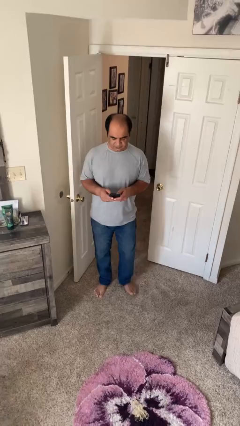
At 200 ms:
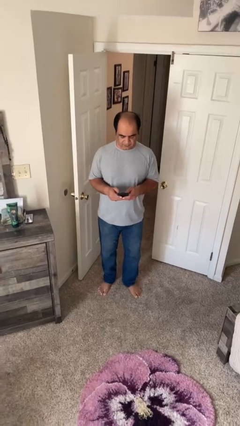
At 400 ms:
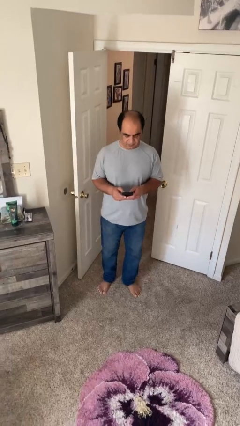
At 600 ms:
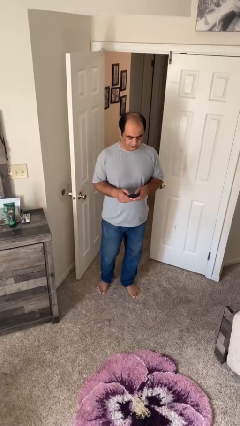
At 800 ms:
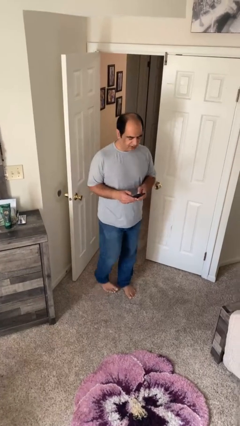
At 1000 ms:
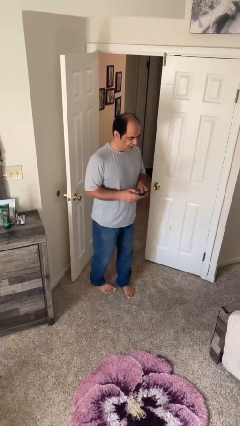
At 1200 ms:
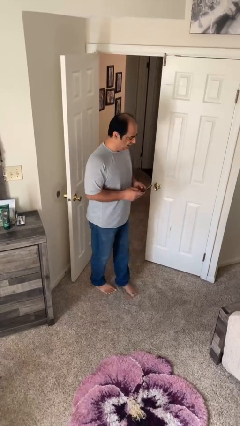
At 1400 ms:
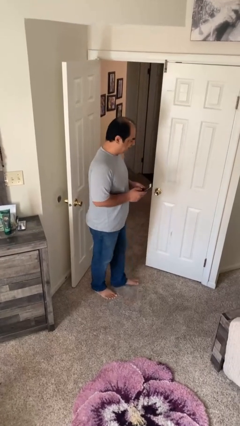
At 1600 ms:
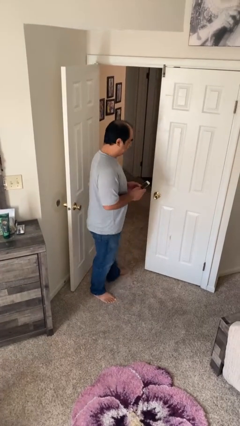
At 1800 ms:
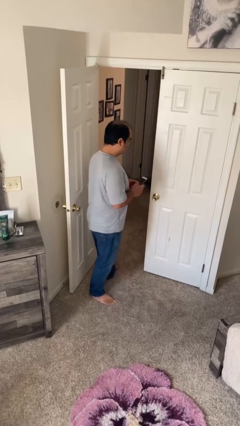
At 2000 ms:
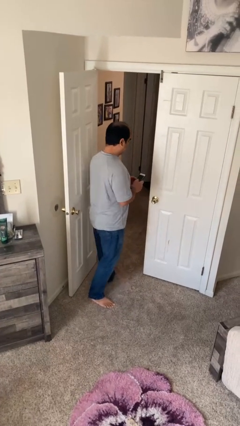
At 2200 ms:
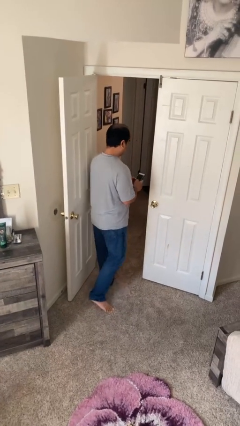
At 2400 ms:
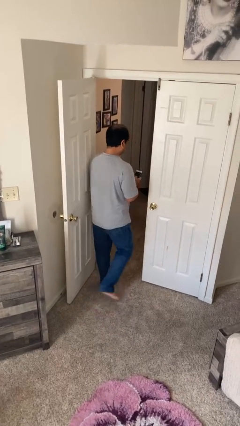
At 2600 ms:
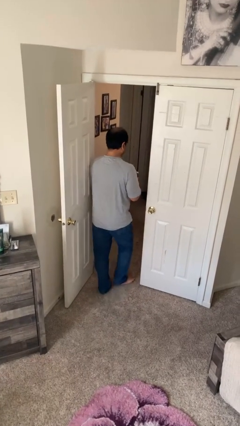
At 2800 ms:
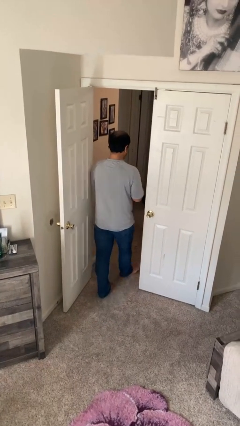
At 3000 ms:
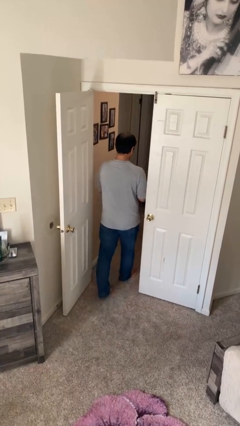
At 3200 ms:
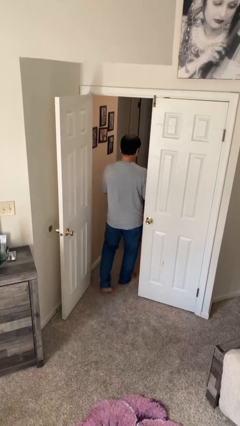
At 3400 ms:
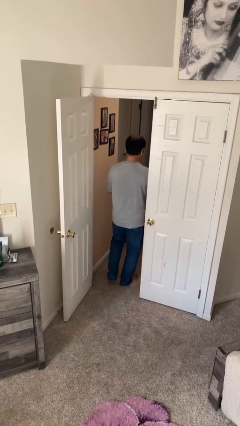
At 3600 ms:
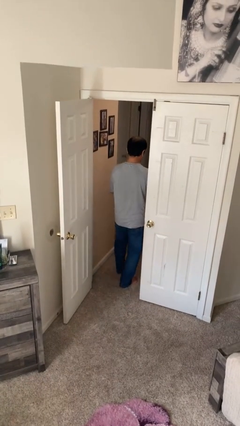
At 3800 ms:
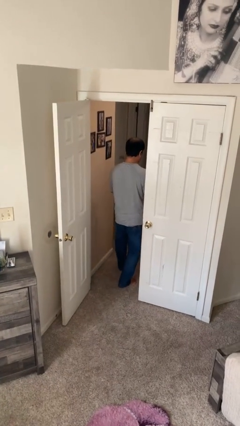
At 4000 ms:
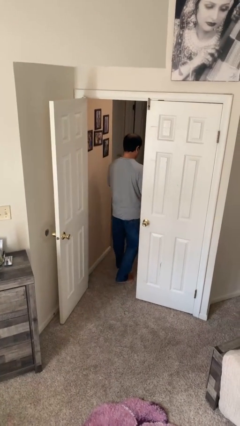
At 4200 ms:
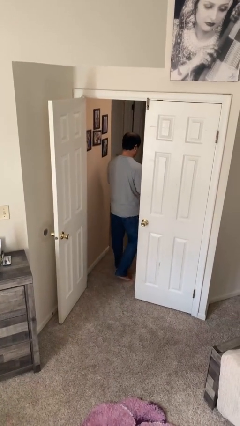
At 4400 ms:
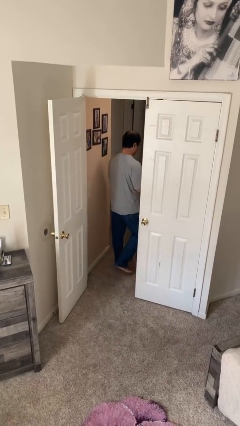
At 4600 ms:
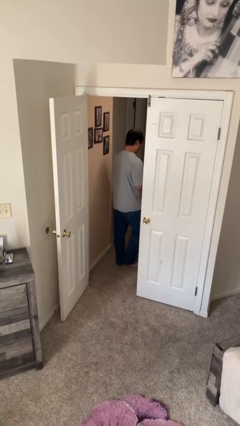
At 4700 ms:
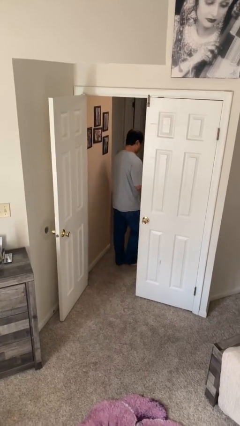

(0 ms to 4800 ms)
person exits scene through structure

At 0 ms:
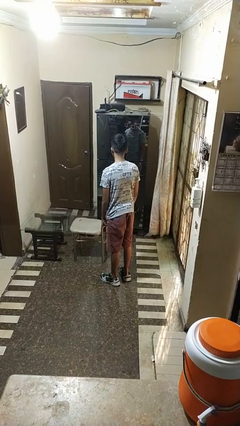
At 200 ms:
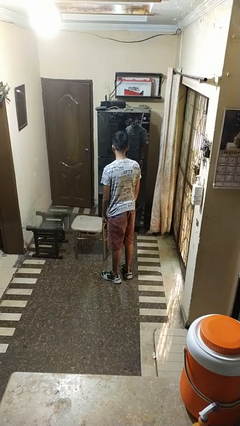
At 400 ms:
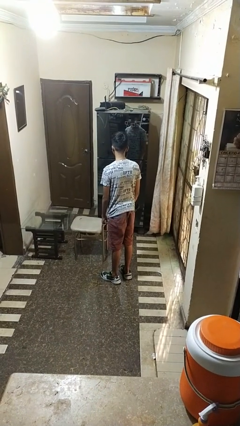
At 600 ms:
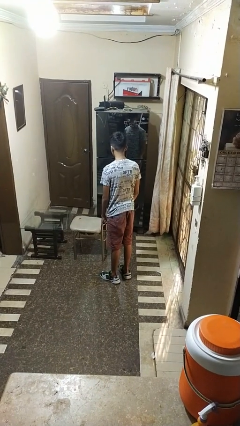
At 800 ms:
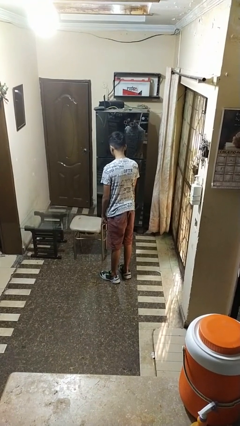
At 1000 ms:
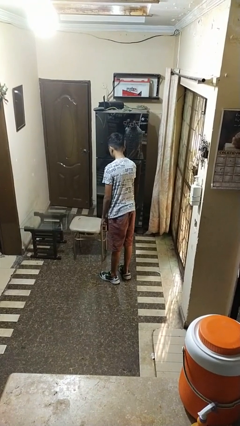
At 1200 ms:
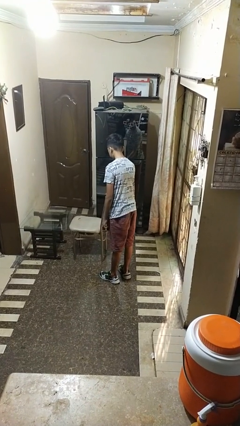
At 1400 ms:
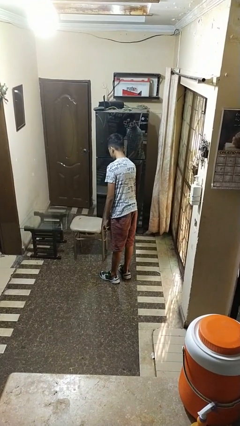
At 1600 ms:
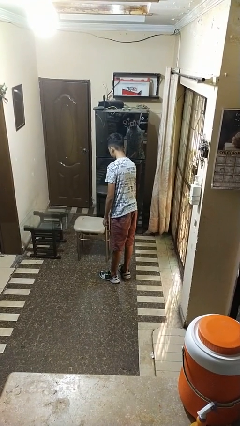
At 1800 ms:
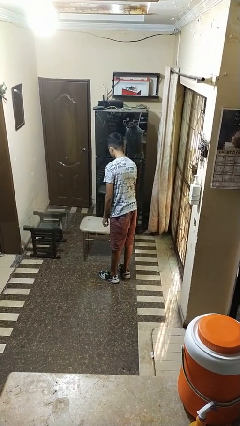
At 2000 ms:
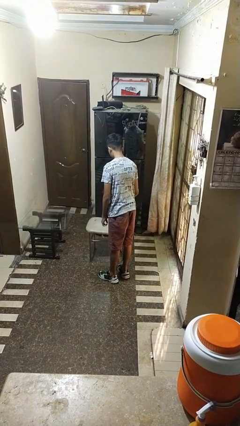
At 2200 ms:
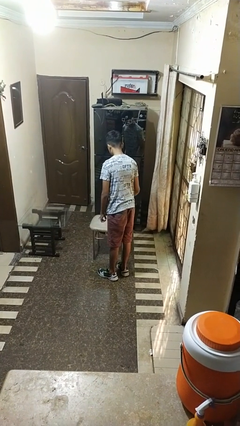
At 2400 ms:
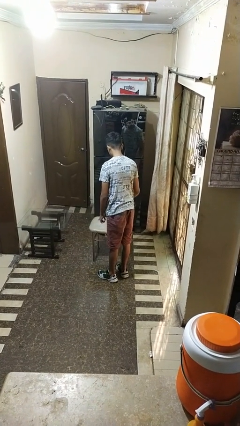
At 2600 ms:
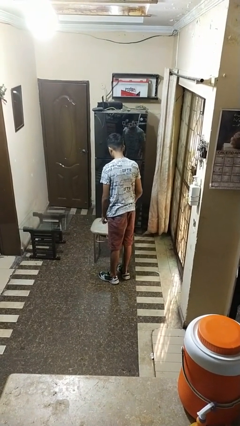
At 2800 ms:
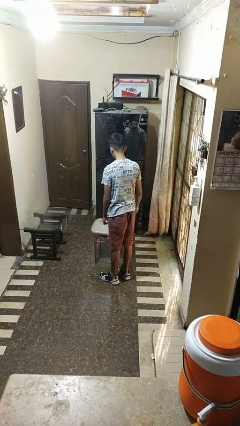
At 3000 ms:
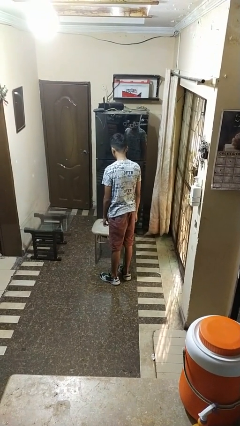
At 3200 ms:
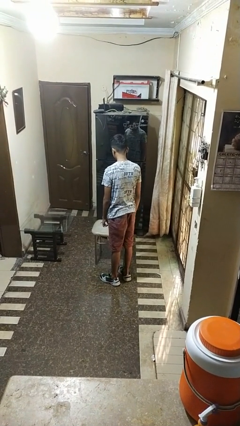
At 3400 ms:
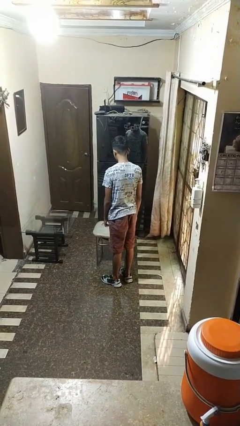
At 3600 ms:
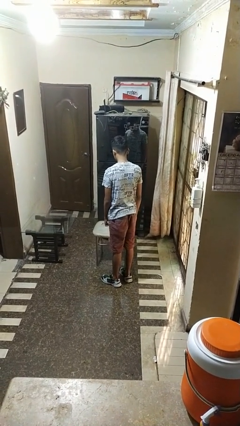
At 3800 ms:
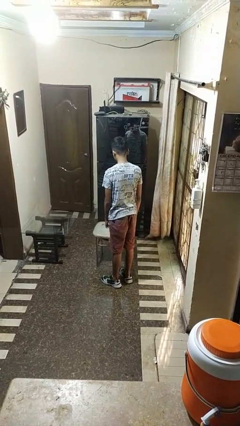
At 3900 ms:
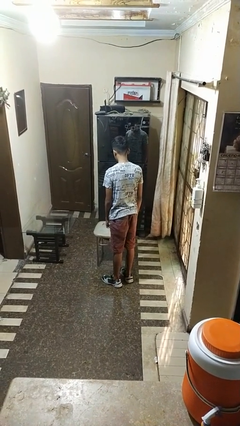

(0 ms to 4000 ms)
person pulls out chair

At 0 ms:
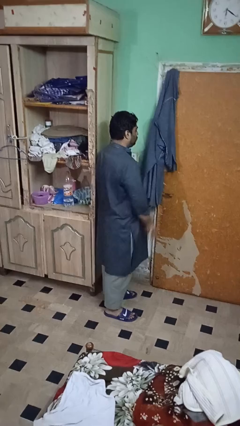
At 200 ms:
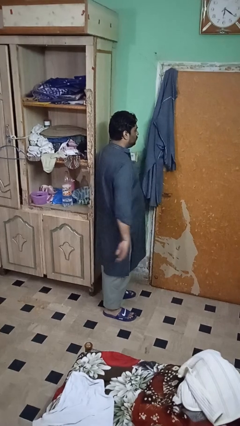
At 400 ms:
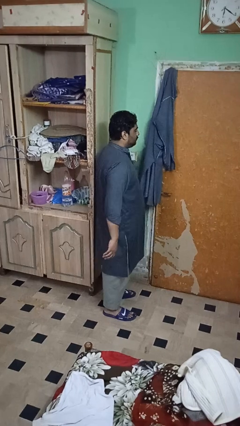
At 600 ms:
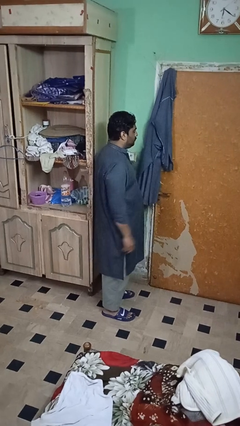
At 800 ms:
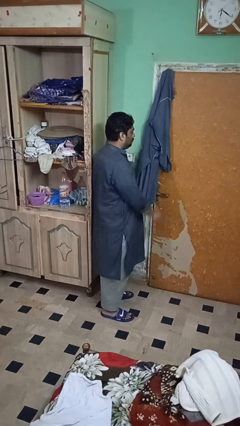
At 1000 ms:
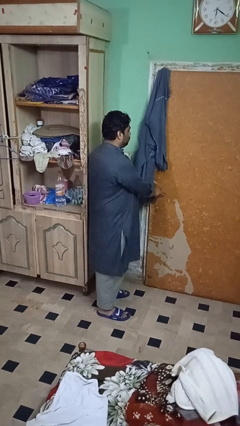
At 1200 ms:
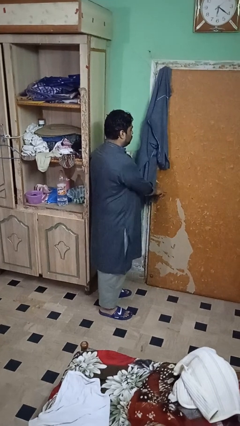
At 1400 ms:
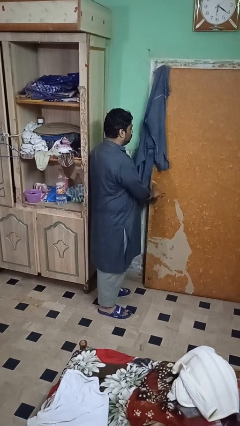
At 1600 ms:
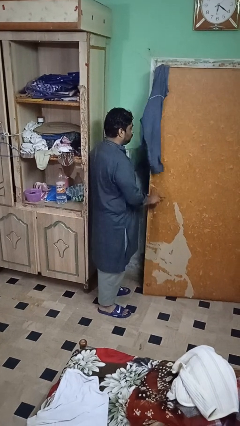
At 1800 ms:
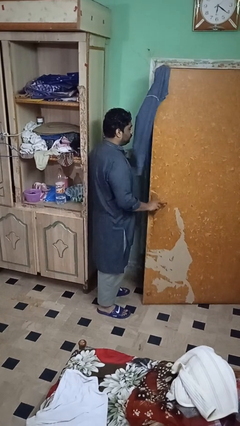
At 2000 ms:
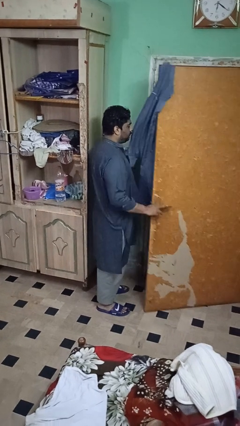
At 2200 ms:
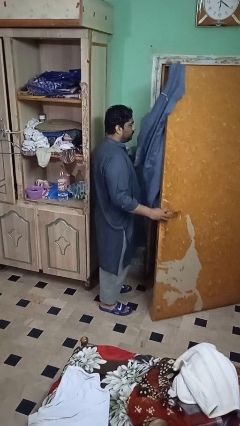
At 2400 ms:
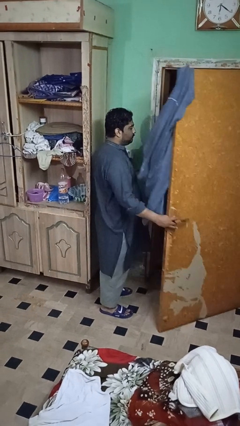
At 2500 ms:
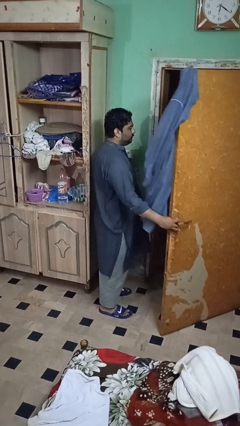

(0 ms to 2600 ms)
person opens closet door

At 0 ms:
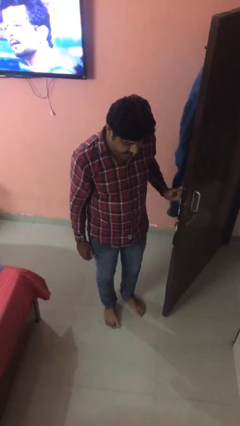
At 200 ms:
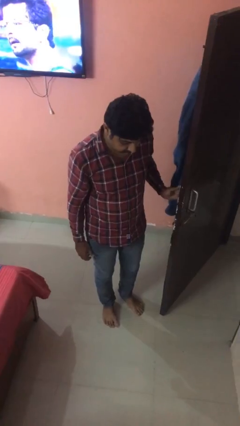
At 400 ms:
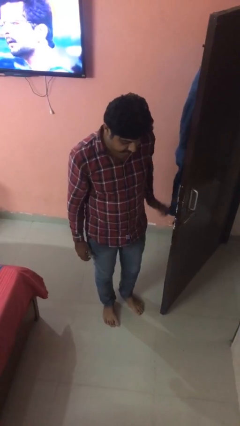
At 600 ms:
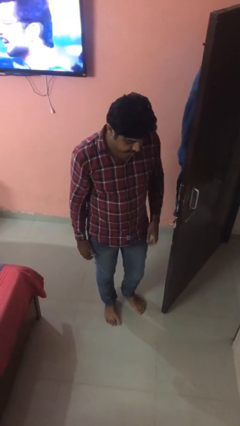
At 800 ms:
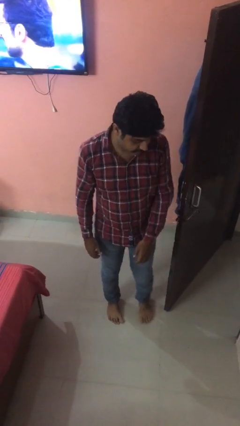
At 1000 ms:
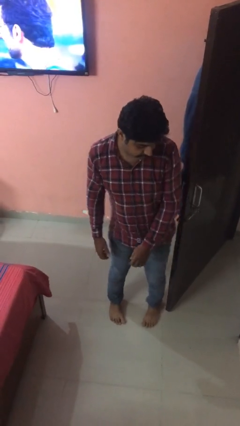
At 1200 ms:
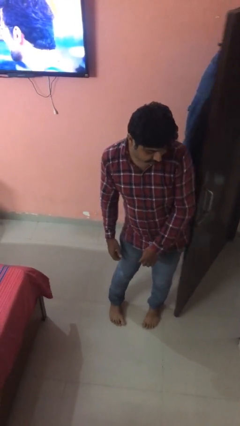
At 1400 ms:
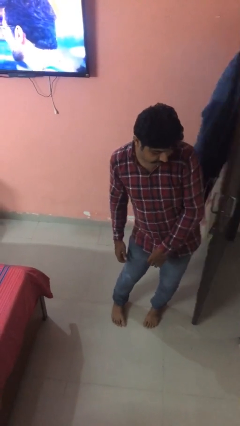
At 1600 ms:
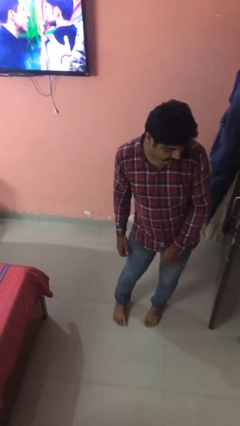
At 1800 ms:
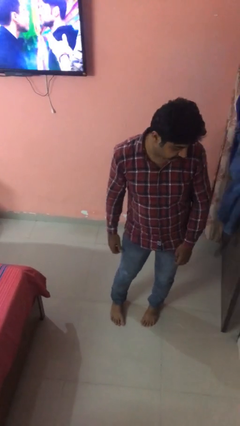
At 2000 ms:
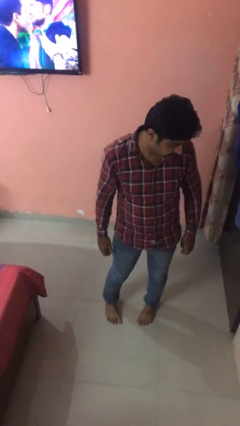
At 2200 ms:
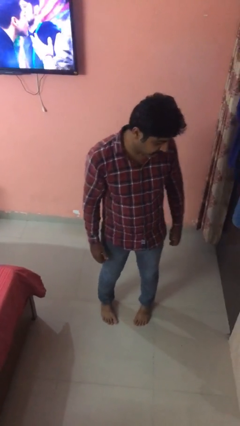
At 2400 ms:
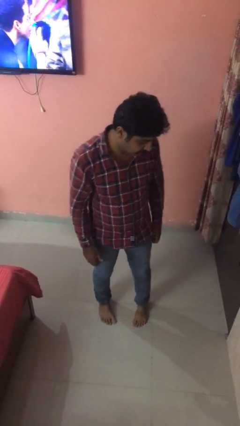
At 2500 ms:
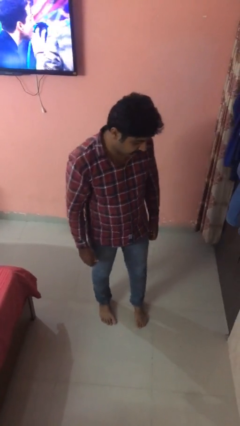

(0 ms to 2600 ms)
person closes door with hip

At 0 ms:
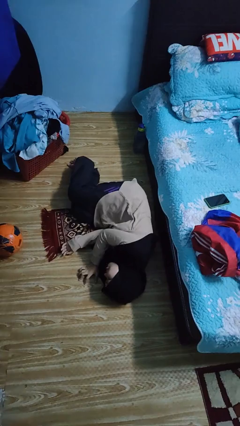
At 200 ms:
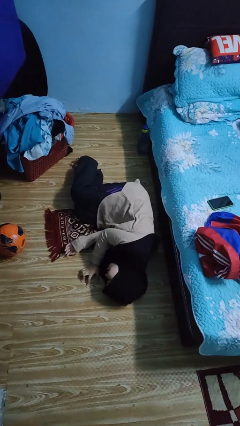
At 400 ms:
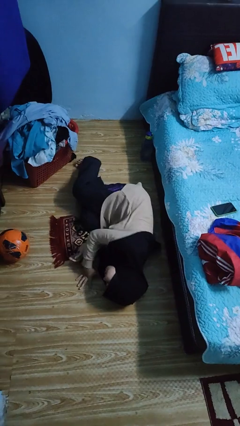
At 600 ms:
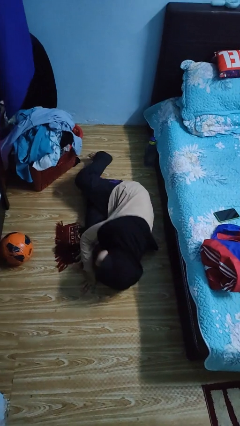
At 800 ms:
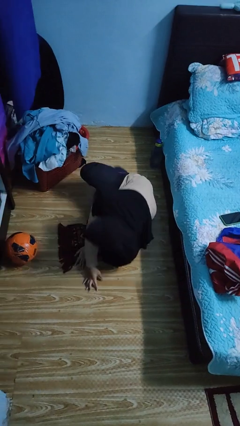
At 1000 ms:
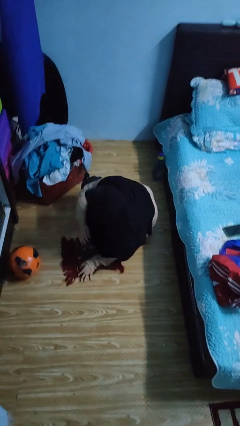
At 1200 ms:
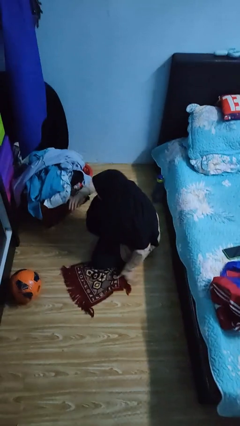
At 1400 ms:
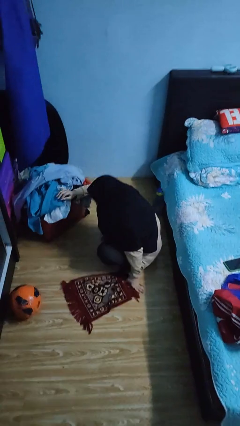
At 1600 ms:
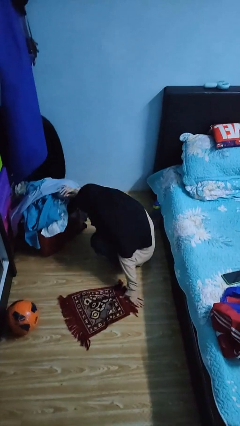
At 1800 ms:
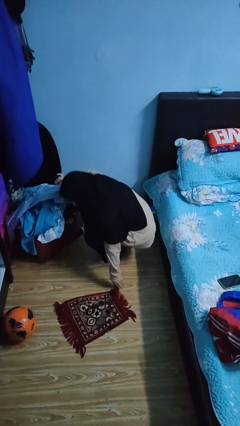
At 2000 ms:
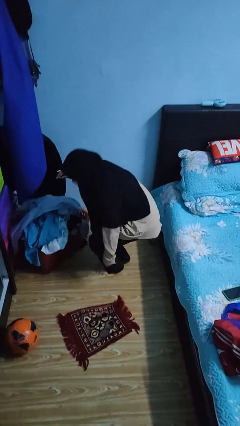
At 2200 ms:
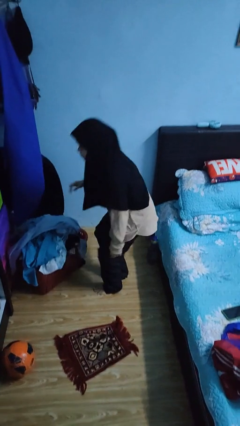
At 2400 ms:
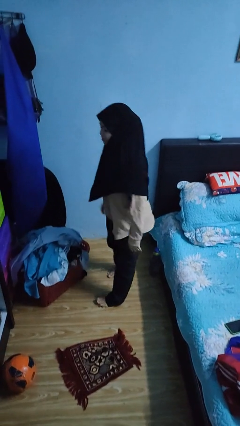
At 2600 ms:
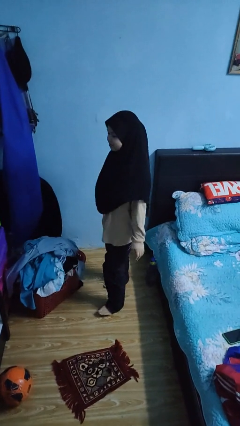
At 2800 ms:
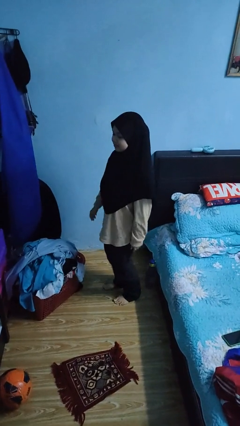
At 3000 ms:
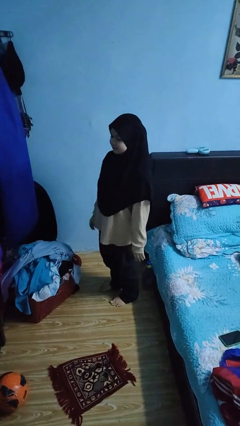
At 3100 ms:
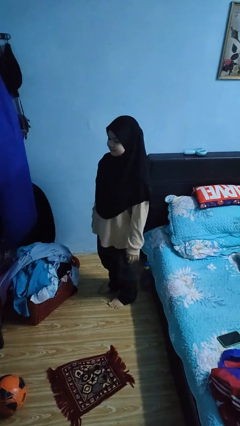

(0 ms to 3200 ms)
person stands up from floor

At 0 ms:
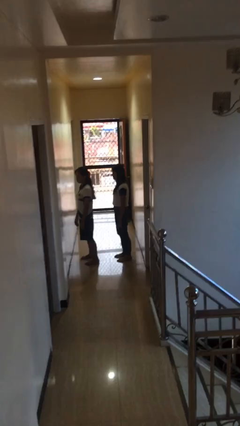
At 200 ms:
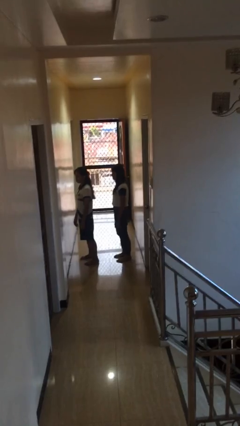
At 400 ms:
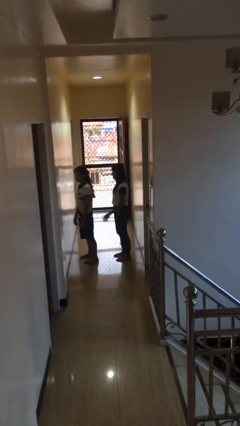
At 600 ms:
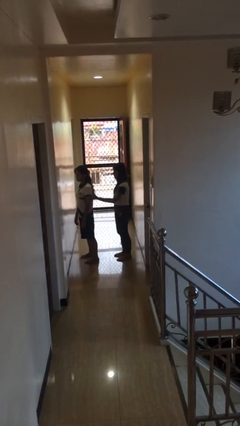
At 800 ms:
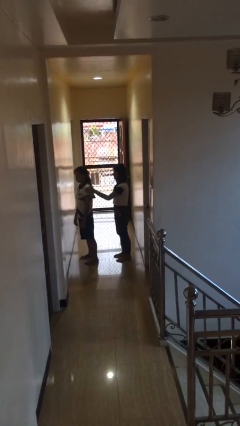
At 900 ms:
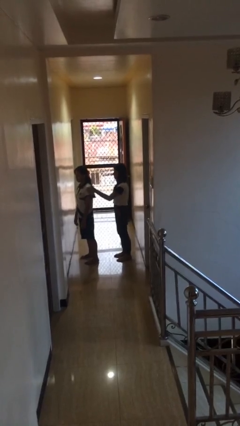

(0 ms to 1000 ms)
person grabs person by shoulder
